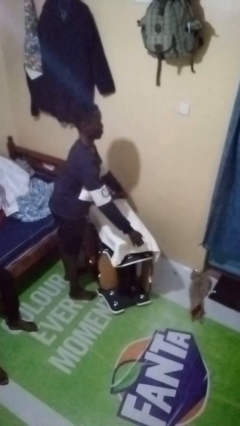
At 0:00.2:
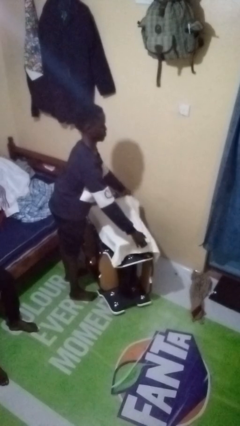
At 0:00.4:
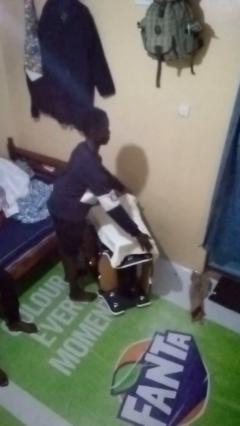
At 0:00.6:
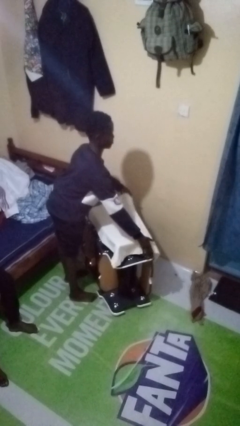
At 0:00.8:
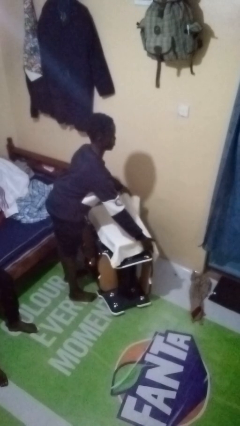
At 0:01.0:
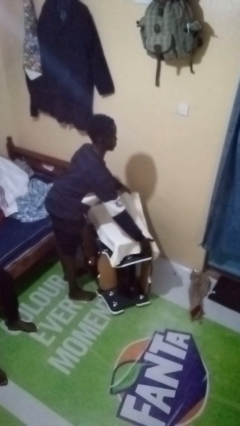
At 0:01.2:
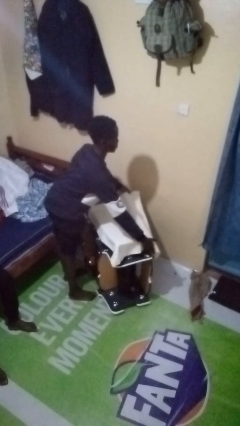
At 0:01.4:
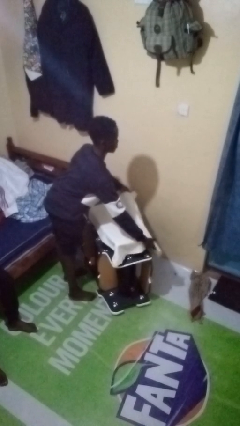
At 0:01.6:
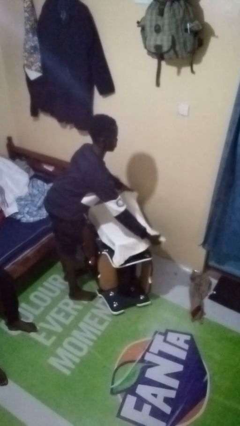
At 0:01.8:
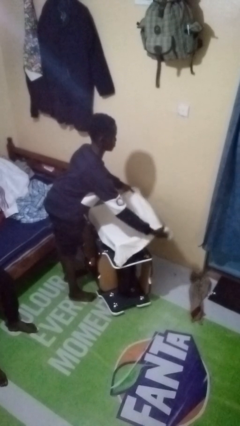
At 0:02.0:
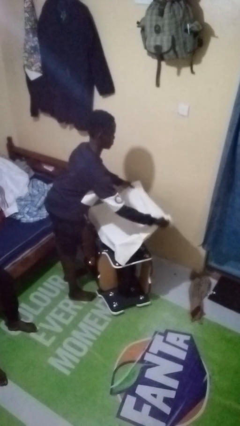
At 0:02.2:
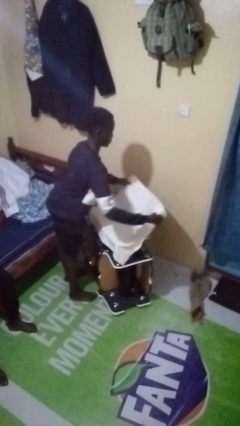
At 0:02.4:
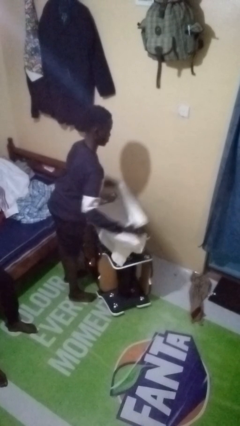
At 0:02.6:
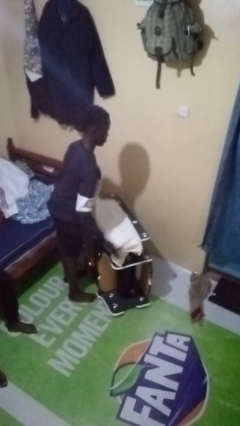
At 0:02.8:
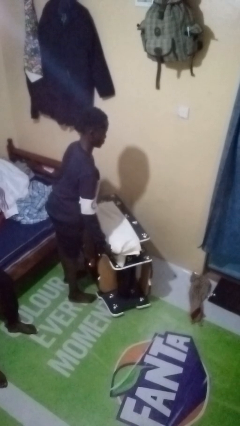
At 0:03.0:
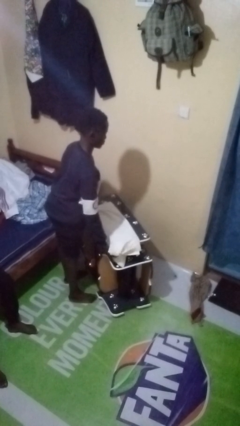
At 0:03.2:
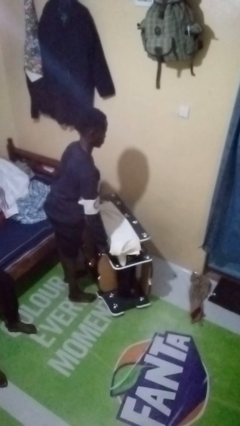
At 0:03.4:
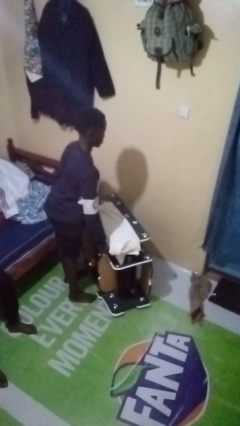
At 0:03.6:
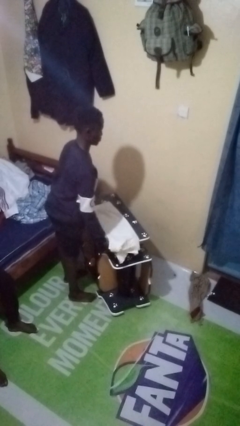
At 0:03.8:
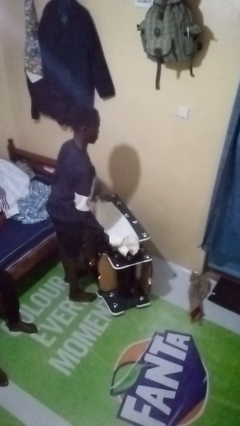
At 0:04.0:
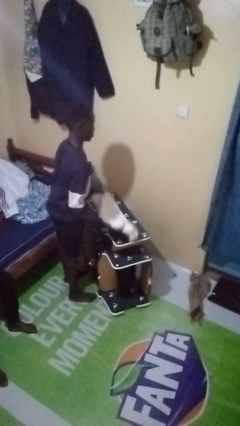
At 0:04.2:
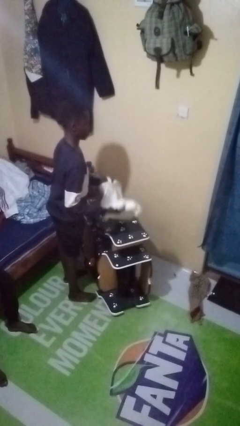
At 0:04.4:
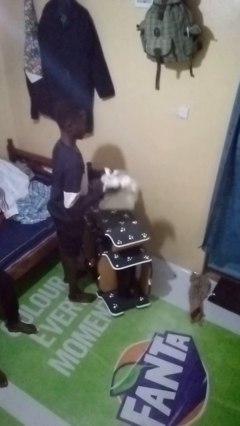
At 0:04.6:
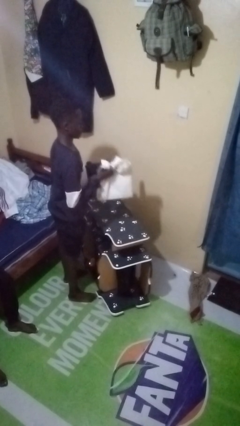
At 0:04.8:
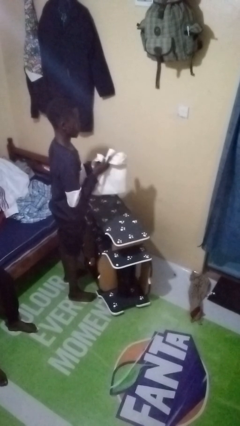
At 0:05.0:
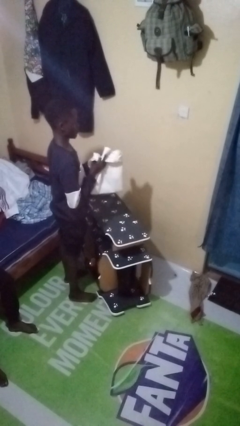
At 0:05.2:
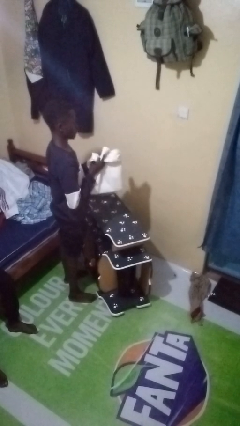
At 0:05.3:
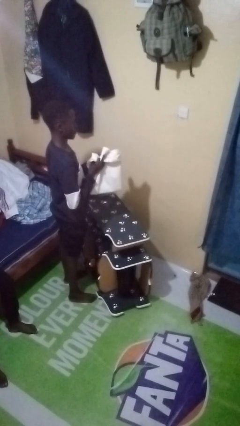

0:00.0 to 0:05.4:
person folds tablecloth

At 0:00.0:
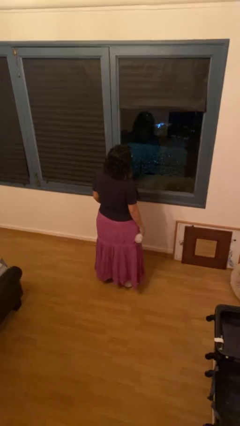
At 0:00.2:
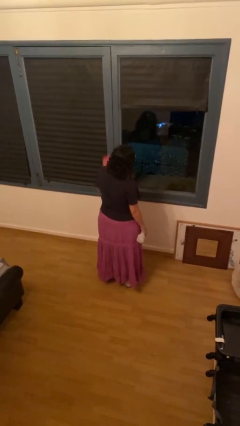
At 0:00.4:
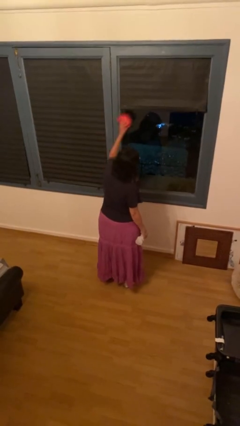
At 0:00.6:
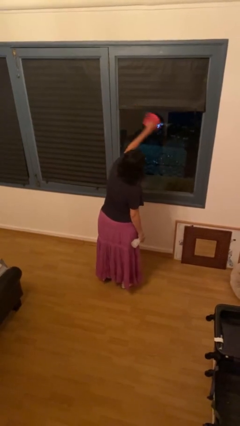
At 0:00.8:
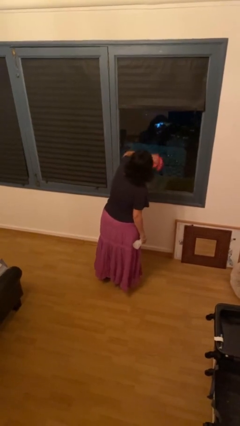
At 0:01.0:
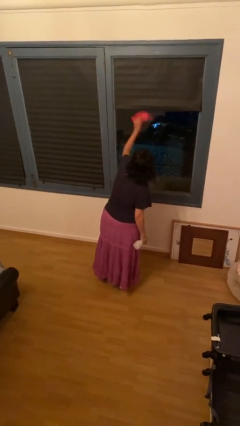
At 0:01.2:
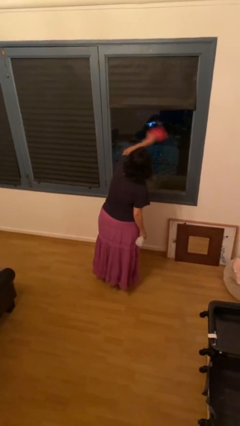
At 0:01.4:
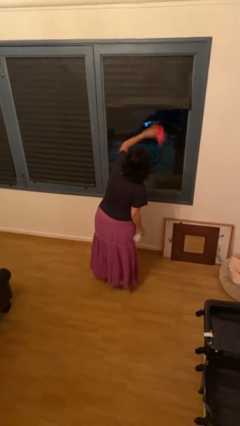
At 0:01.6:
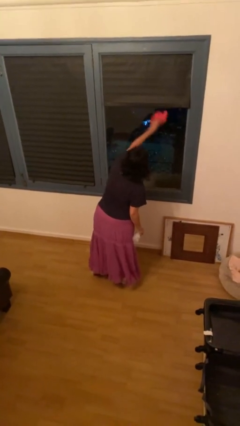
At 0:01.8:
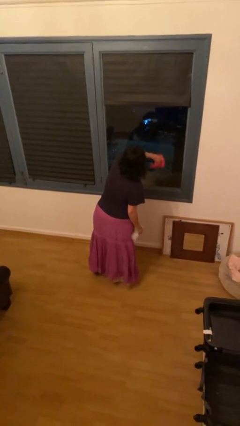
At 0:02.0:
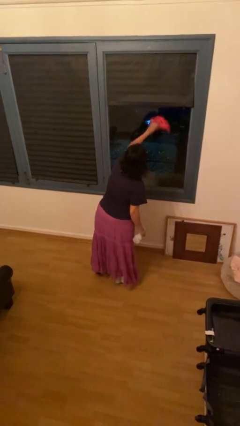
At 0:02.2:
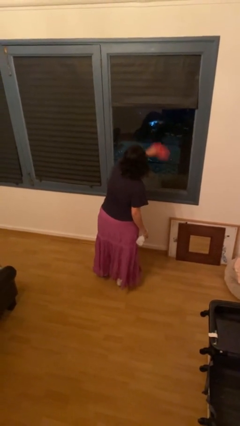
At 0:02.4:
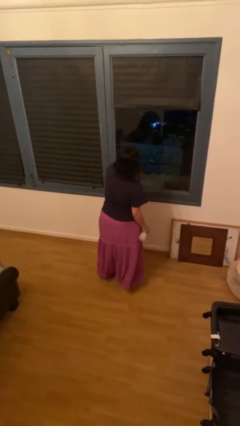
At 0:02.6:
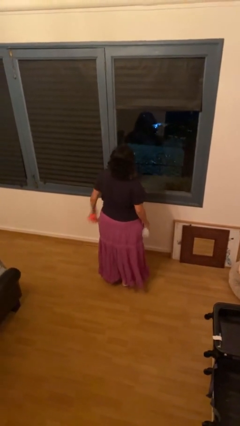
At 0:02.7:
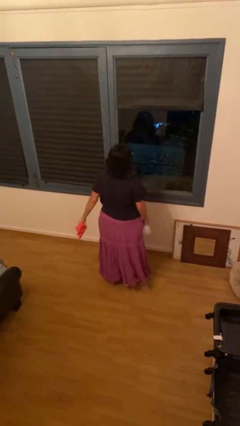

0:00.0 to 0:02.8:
person washes window

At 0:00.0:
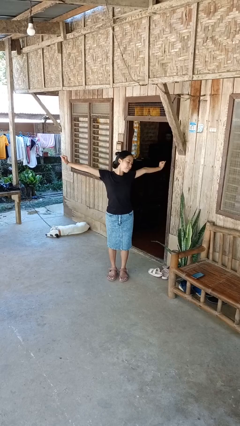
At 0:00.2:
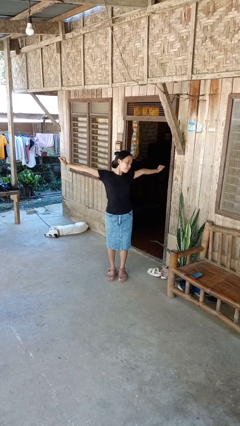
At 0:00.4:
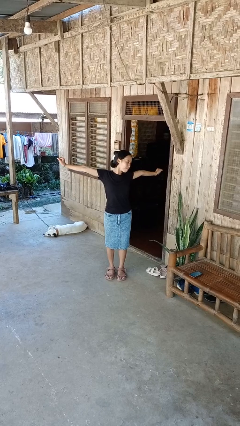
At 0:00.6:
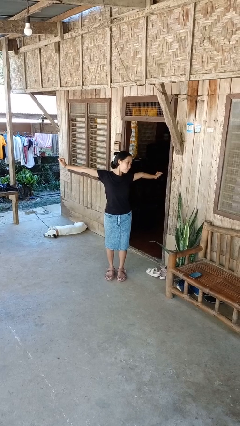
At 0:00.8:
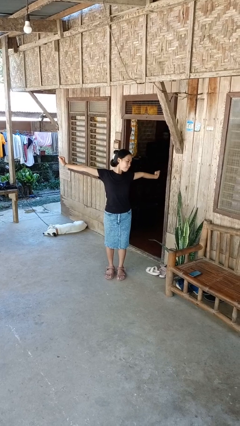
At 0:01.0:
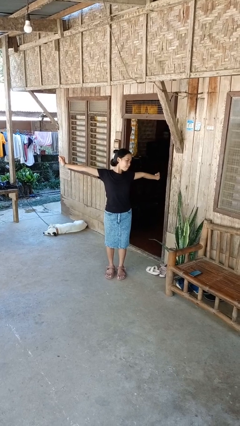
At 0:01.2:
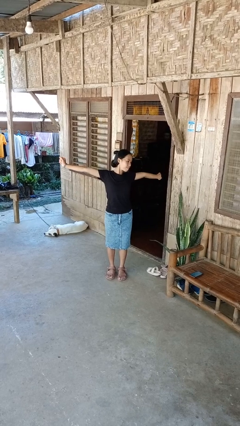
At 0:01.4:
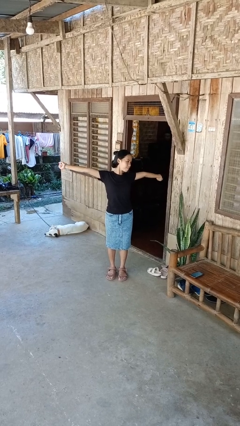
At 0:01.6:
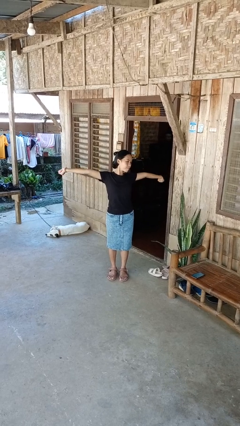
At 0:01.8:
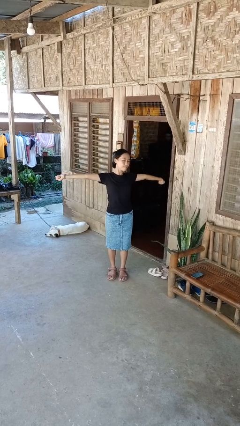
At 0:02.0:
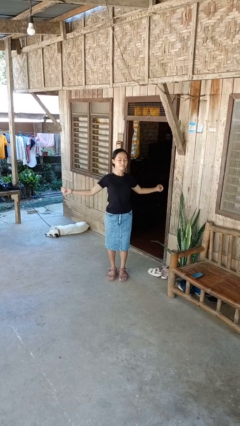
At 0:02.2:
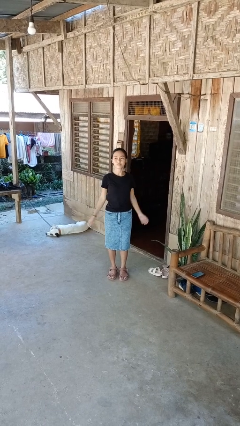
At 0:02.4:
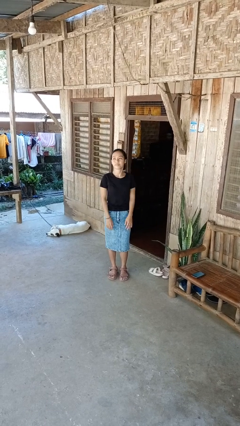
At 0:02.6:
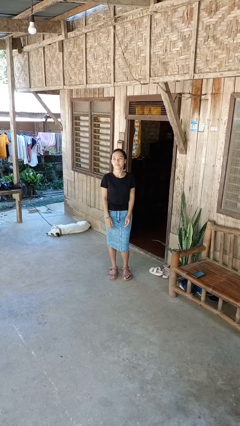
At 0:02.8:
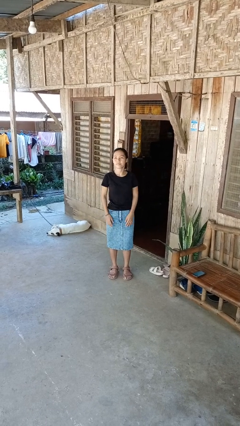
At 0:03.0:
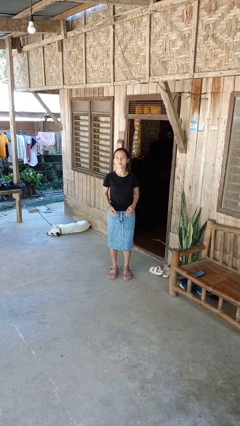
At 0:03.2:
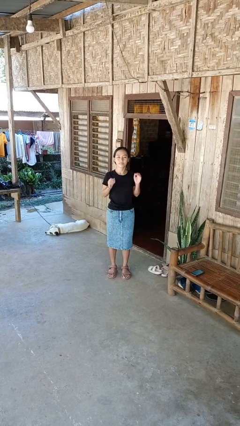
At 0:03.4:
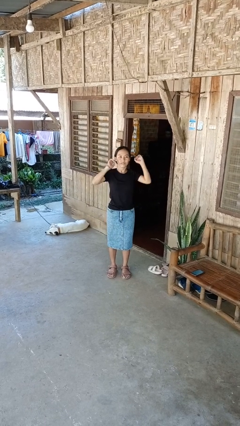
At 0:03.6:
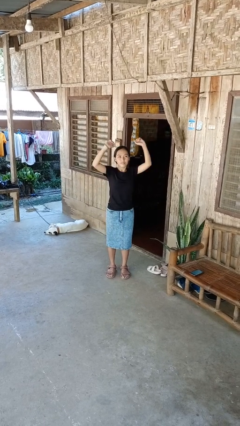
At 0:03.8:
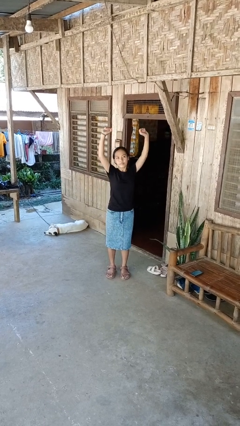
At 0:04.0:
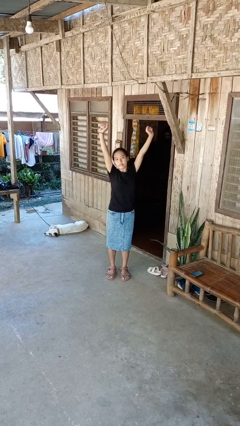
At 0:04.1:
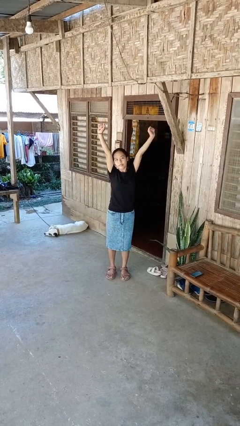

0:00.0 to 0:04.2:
person stretches arms to side

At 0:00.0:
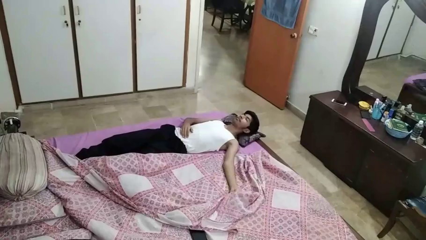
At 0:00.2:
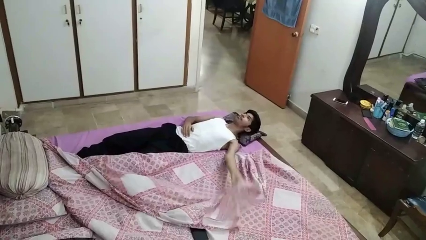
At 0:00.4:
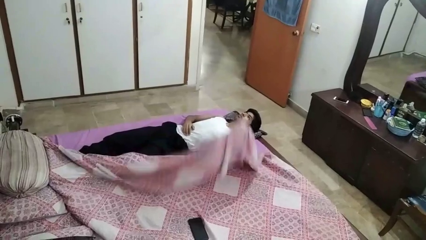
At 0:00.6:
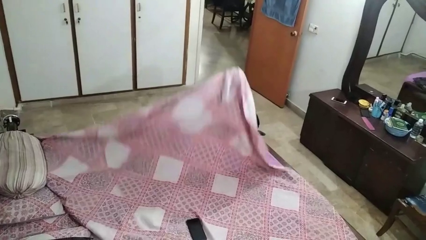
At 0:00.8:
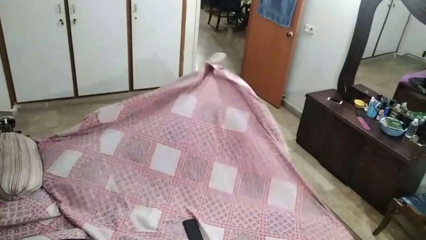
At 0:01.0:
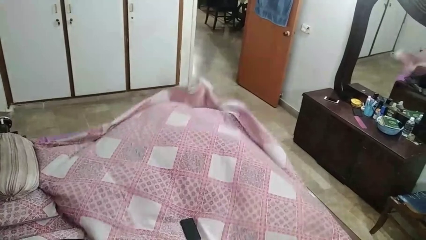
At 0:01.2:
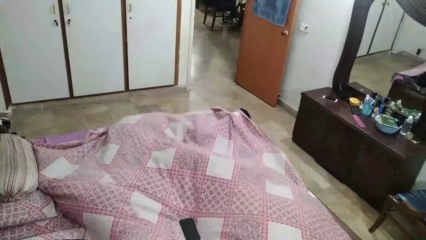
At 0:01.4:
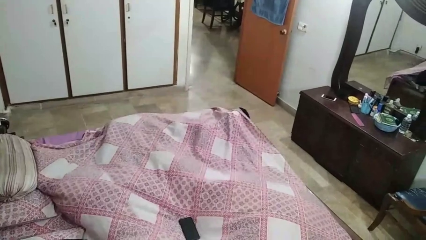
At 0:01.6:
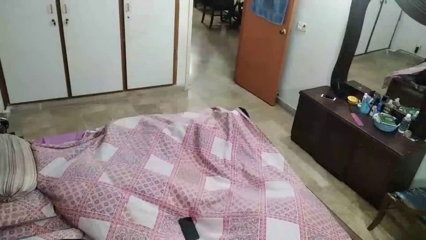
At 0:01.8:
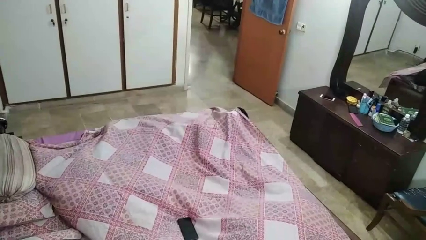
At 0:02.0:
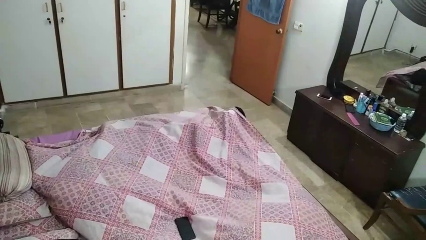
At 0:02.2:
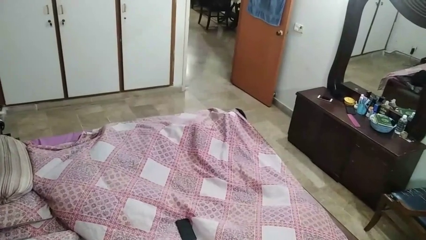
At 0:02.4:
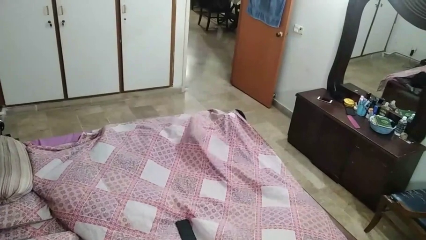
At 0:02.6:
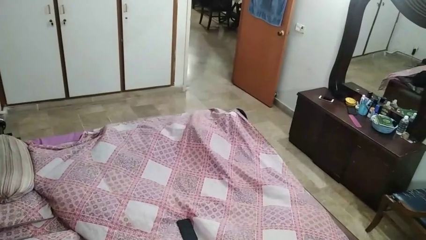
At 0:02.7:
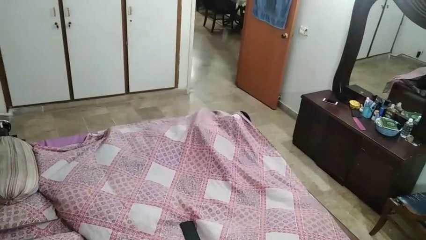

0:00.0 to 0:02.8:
person covers with bedsheets

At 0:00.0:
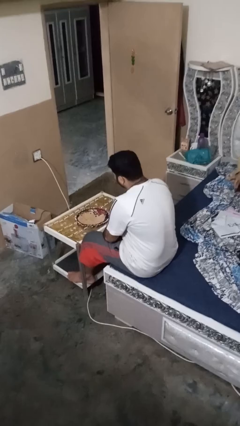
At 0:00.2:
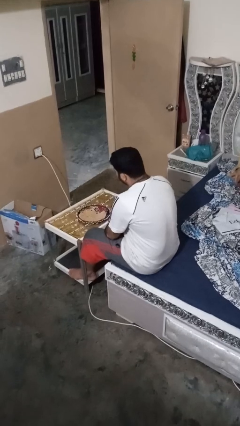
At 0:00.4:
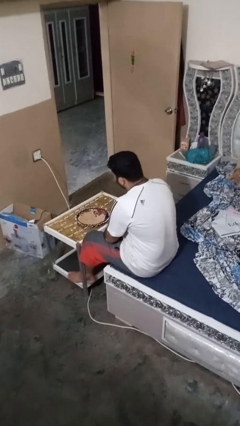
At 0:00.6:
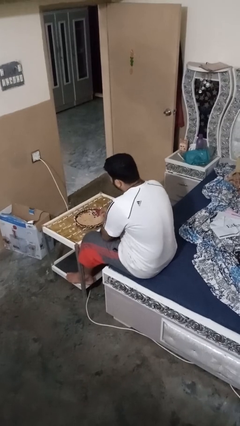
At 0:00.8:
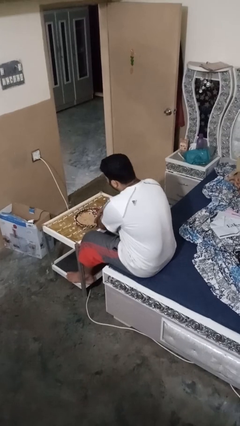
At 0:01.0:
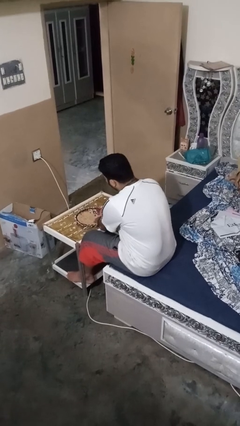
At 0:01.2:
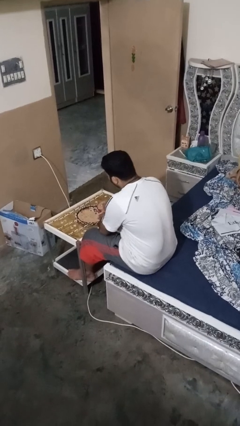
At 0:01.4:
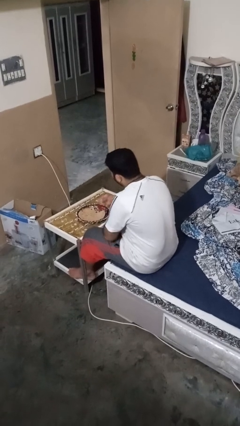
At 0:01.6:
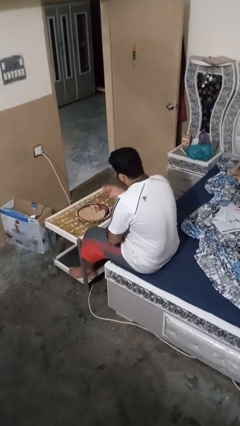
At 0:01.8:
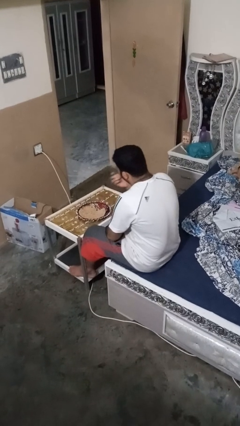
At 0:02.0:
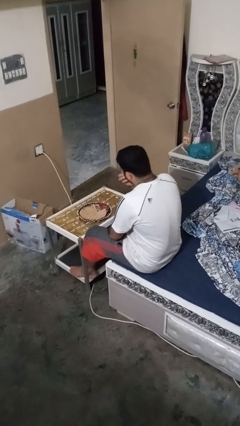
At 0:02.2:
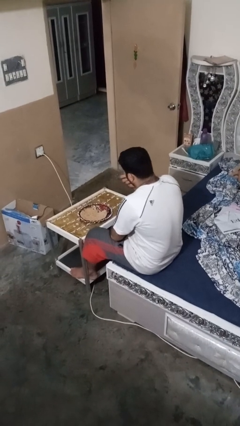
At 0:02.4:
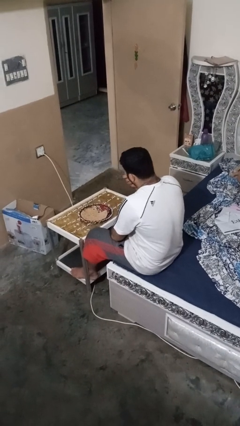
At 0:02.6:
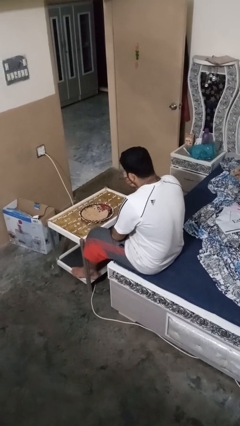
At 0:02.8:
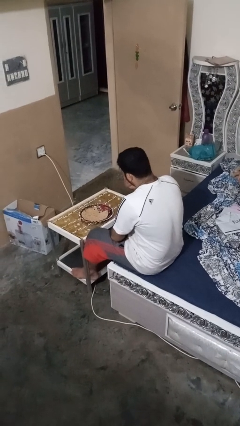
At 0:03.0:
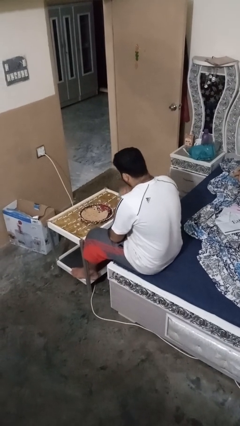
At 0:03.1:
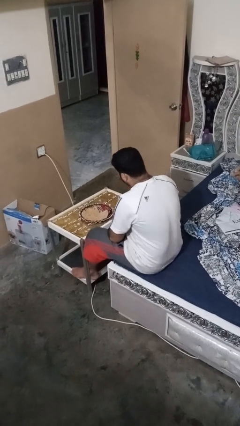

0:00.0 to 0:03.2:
person eats with hands
